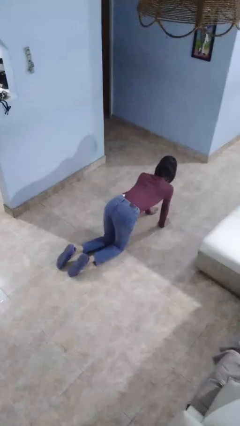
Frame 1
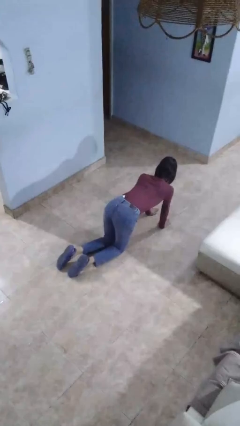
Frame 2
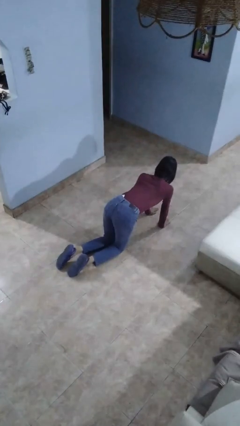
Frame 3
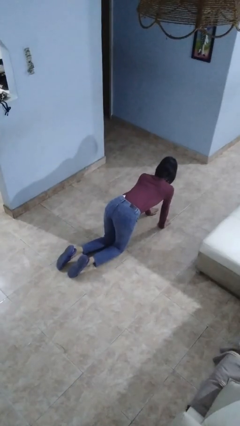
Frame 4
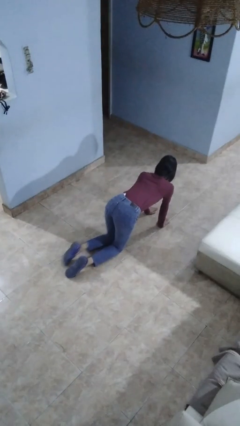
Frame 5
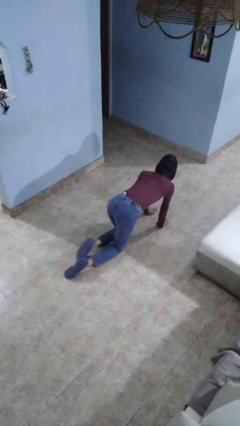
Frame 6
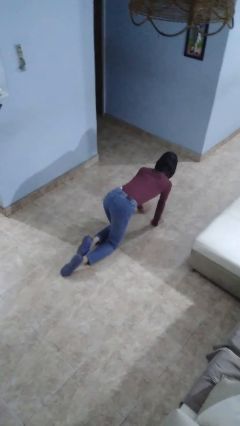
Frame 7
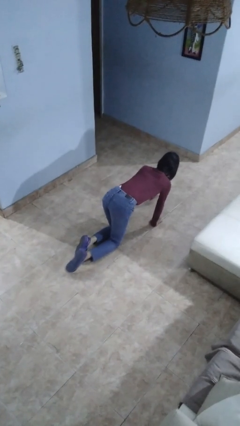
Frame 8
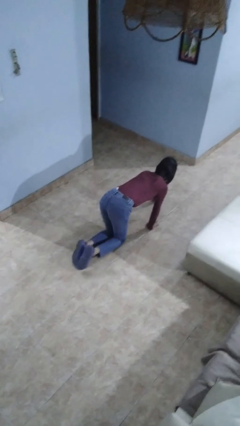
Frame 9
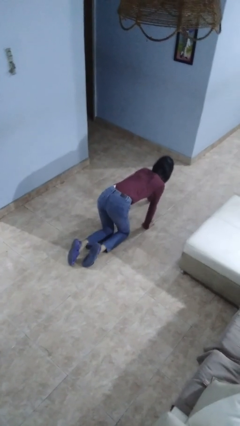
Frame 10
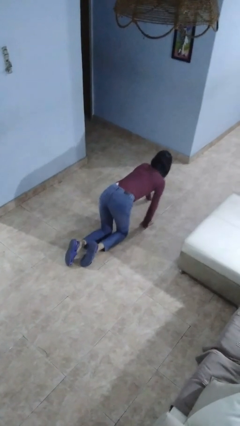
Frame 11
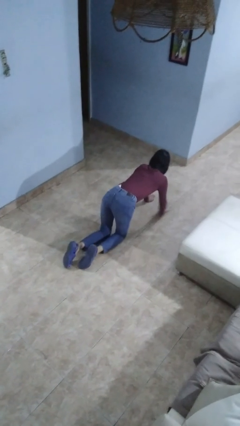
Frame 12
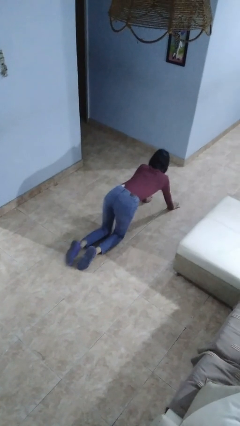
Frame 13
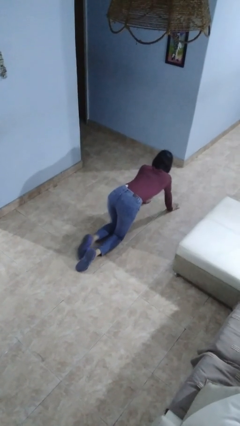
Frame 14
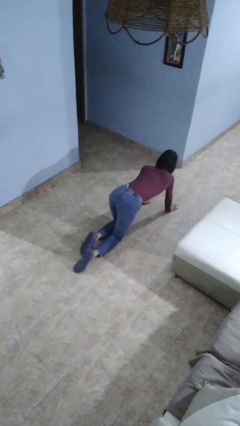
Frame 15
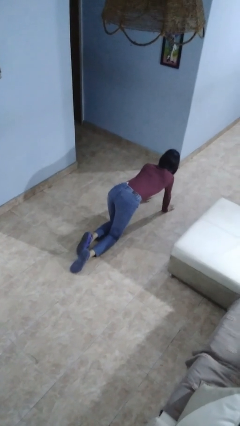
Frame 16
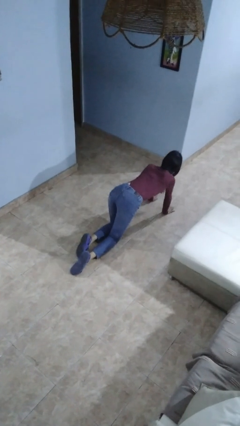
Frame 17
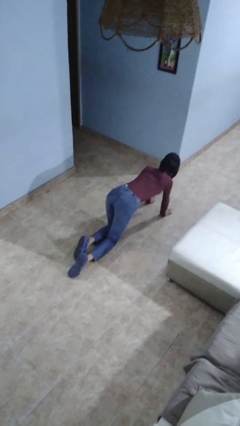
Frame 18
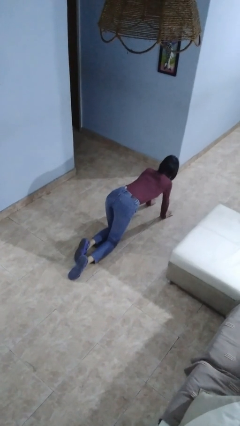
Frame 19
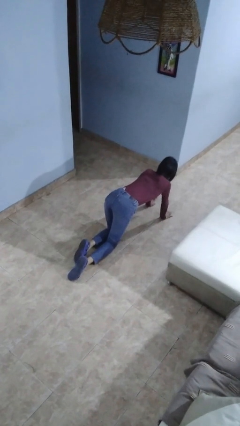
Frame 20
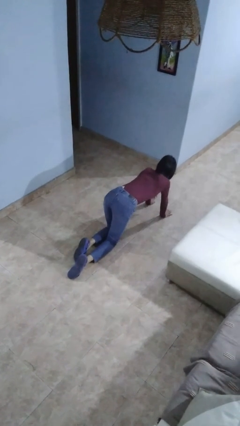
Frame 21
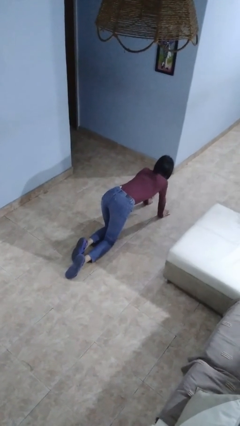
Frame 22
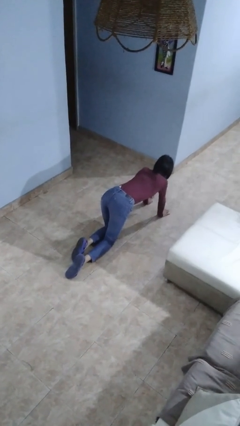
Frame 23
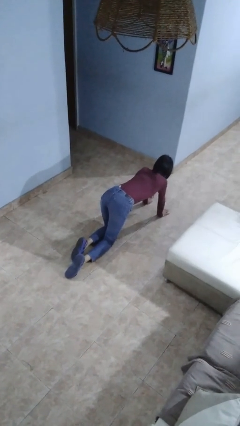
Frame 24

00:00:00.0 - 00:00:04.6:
person crawls

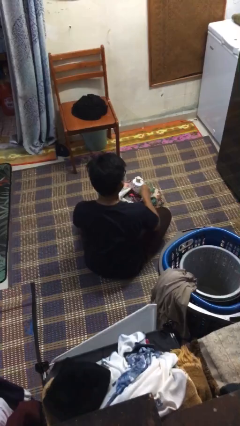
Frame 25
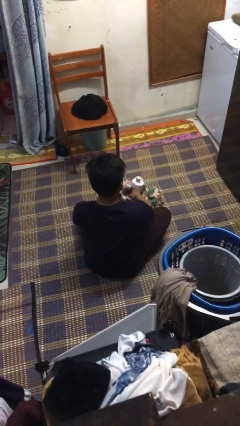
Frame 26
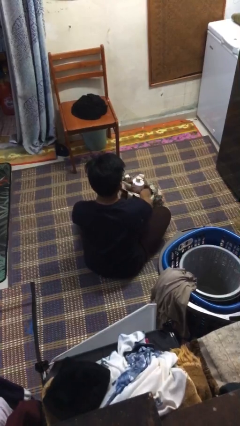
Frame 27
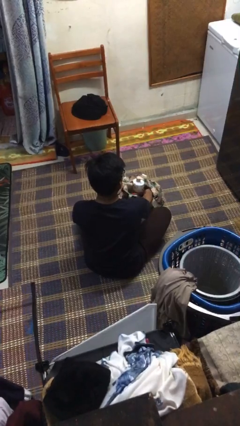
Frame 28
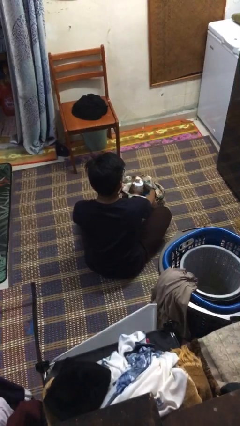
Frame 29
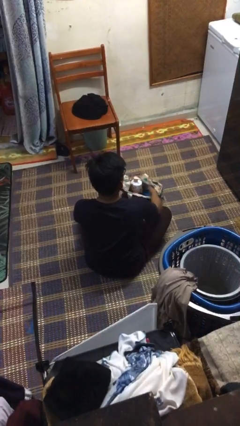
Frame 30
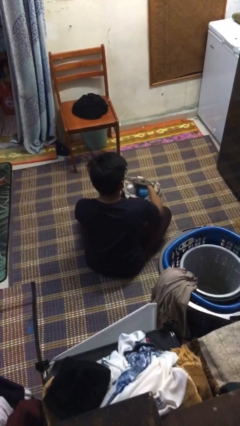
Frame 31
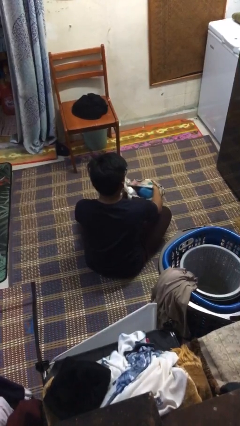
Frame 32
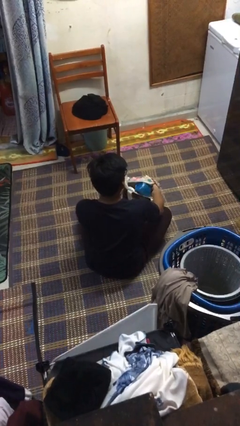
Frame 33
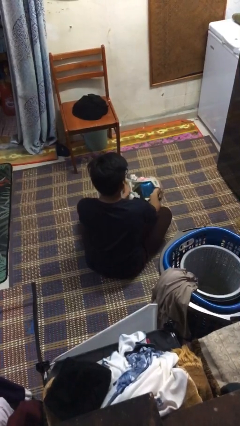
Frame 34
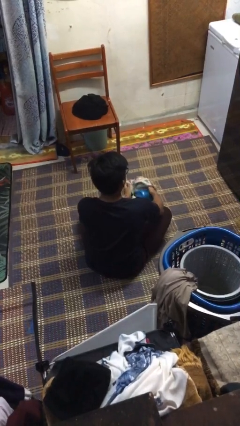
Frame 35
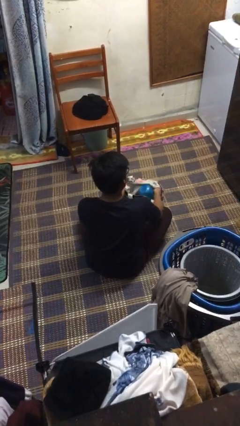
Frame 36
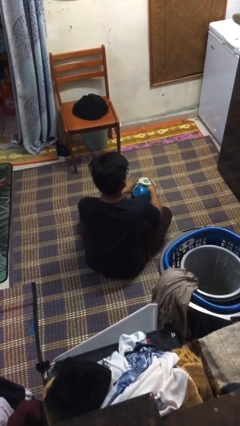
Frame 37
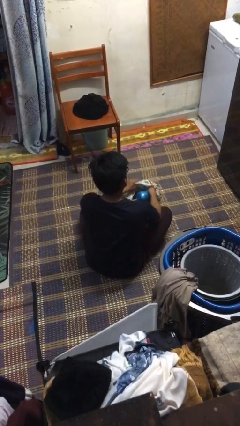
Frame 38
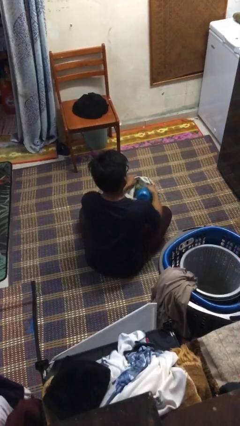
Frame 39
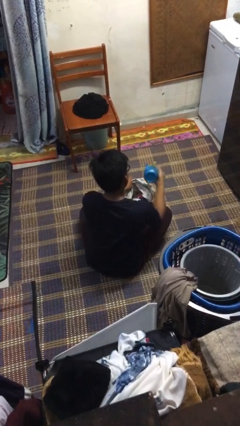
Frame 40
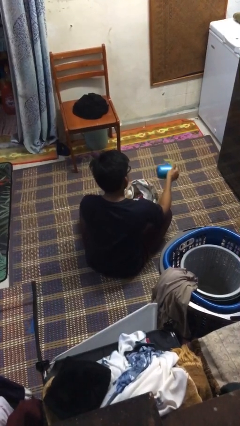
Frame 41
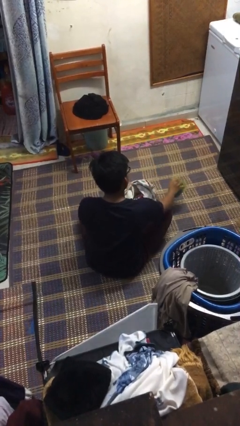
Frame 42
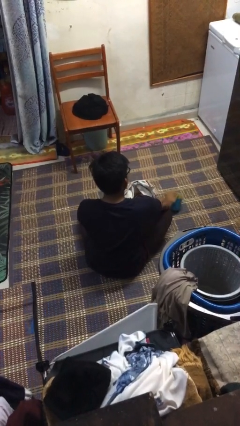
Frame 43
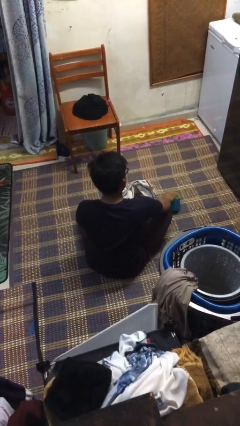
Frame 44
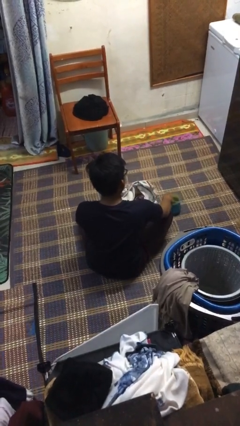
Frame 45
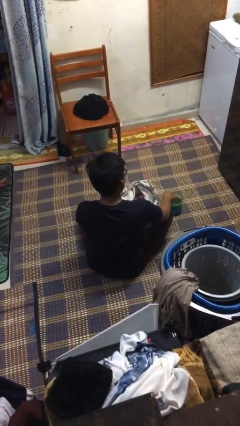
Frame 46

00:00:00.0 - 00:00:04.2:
person takes object from bag

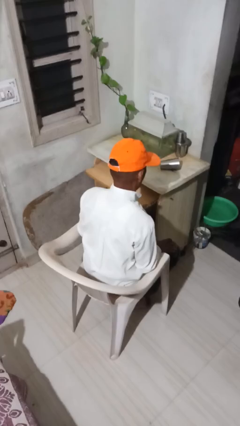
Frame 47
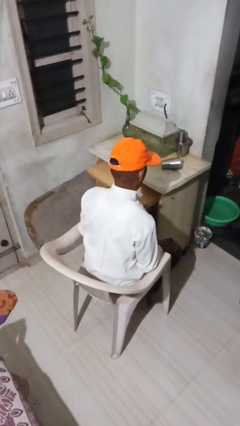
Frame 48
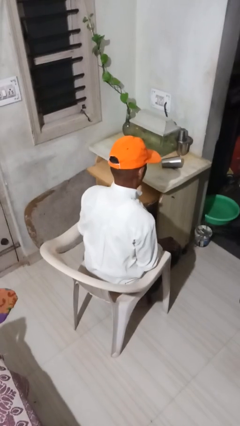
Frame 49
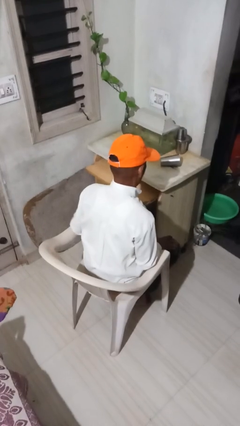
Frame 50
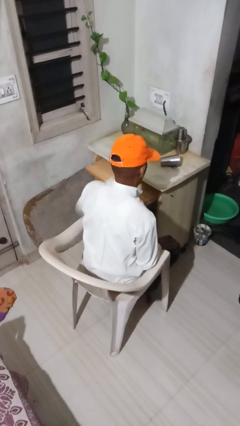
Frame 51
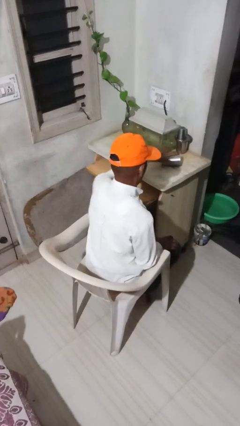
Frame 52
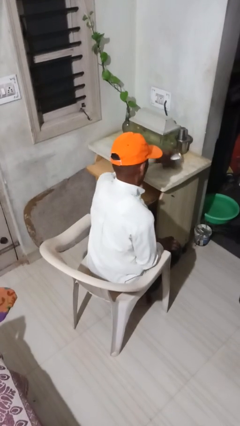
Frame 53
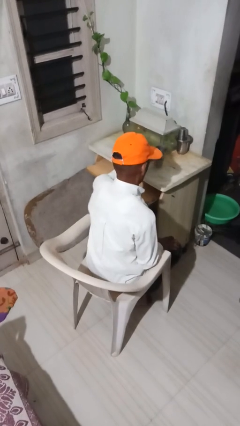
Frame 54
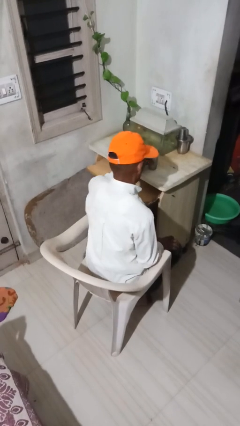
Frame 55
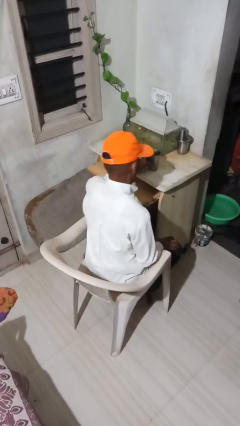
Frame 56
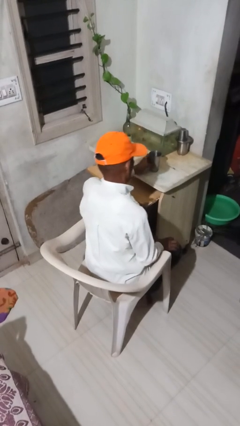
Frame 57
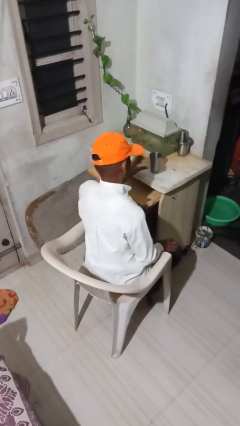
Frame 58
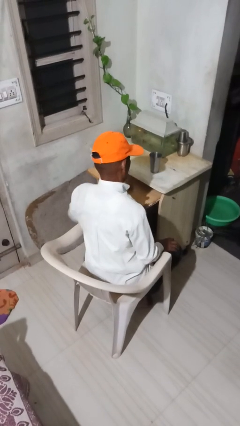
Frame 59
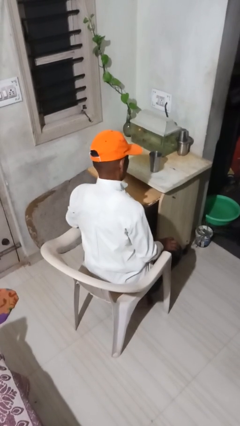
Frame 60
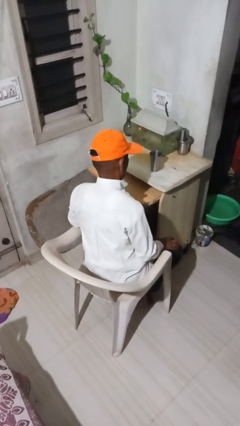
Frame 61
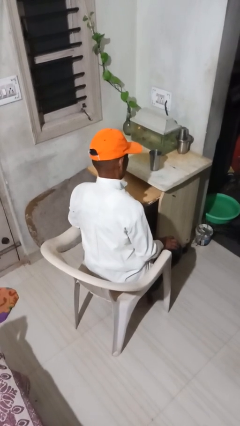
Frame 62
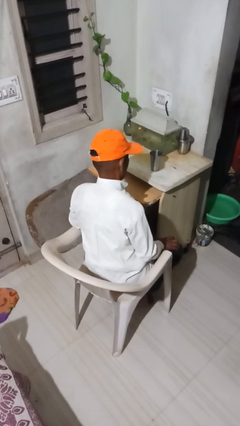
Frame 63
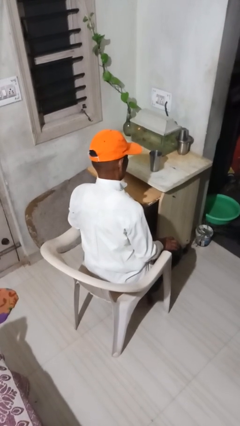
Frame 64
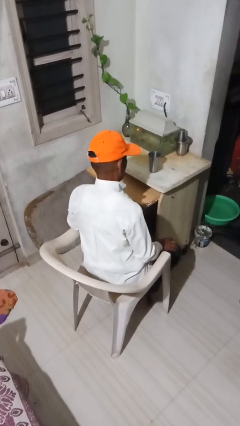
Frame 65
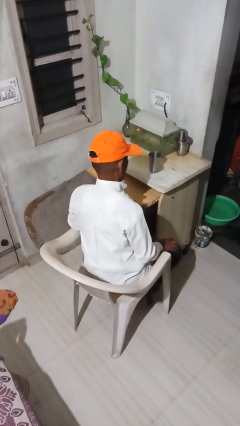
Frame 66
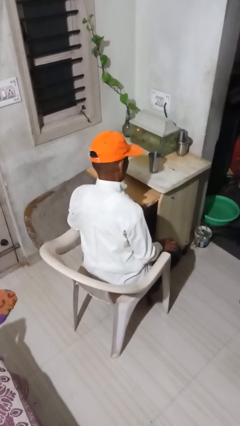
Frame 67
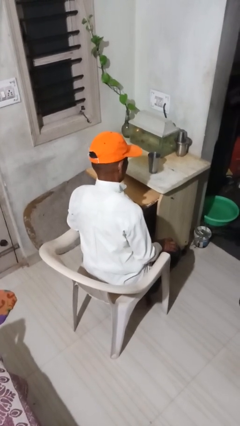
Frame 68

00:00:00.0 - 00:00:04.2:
person sets upright glass

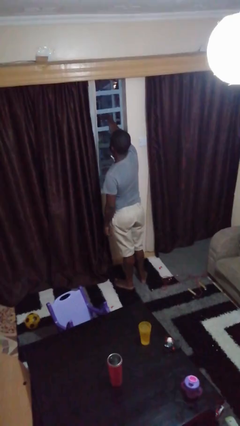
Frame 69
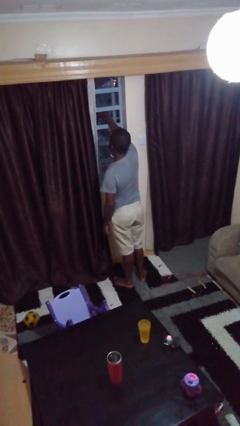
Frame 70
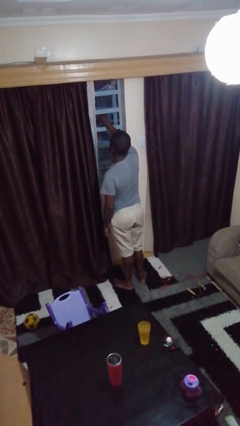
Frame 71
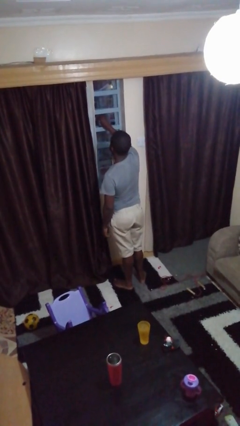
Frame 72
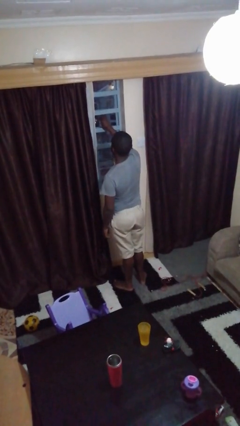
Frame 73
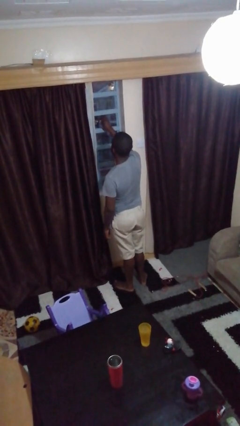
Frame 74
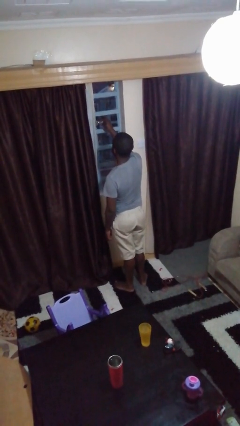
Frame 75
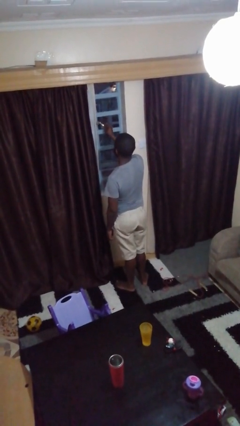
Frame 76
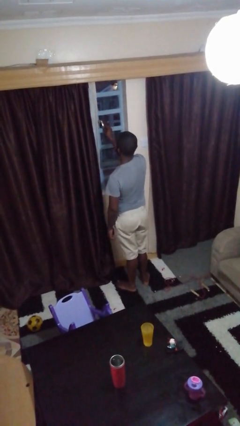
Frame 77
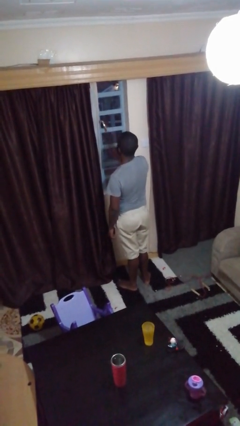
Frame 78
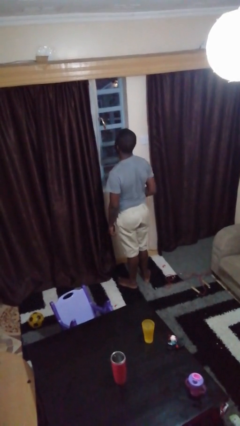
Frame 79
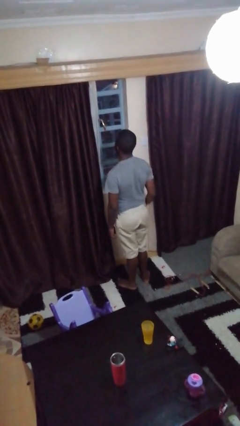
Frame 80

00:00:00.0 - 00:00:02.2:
person closes home window

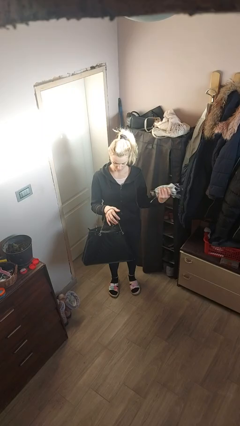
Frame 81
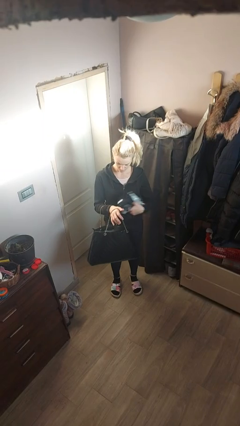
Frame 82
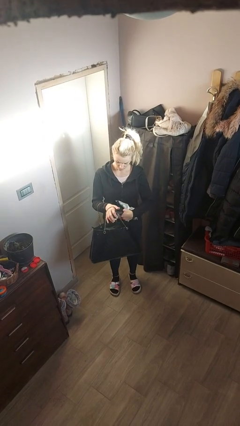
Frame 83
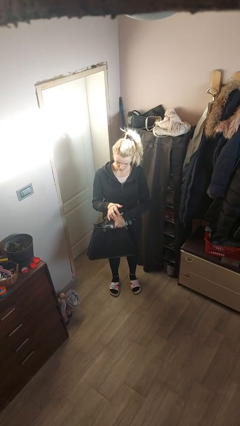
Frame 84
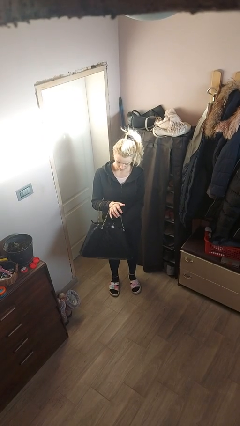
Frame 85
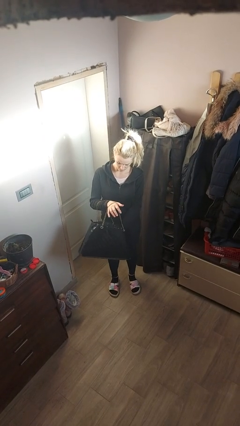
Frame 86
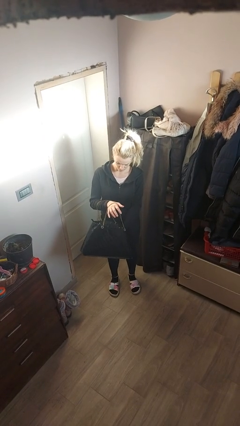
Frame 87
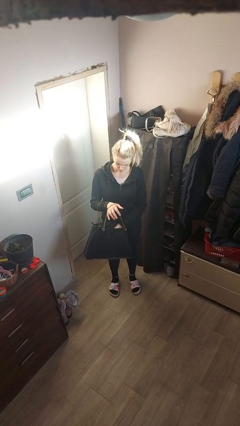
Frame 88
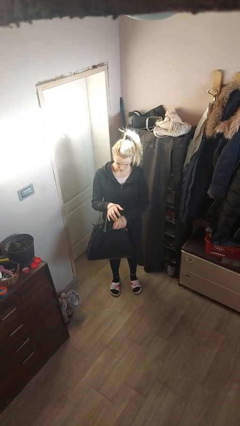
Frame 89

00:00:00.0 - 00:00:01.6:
person puts object into purse

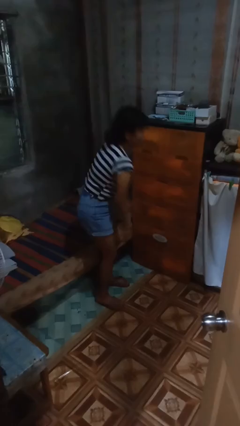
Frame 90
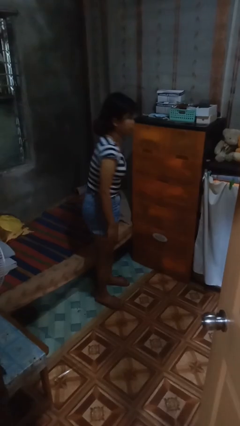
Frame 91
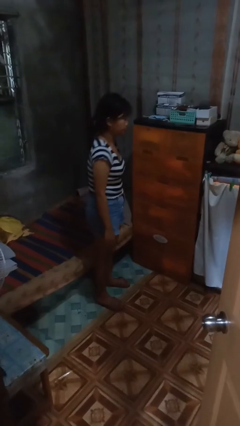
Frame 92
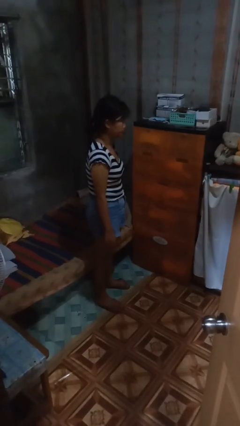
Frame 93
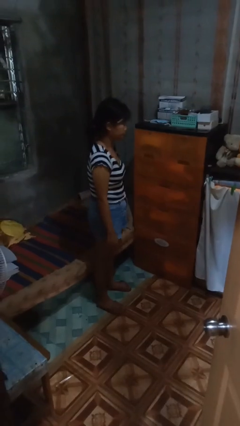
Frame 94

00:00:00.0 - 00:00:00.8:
person closes dresser drawer
